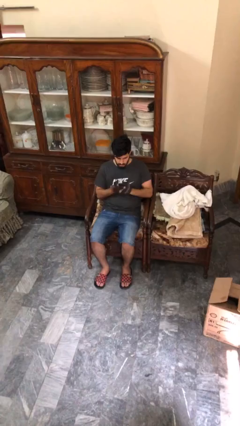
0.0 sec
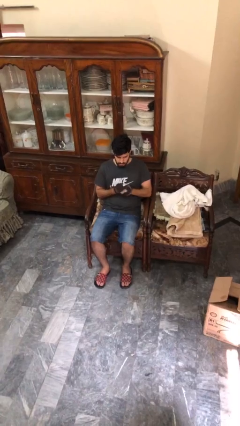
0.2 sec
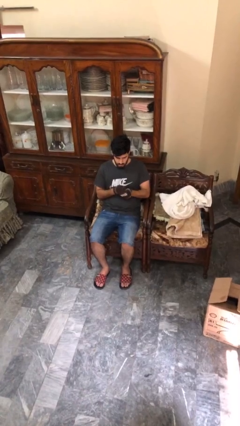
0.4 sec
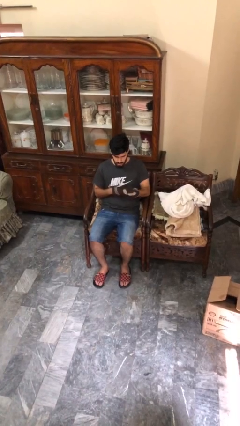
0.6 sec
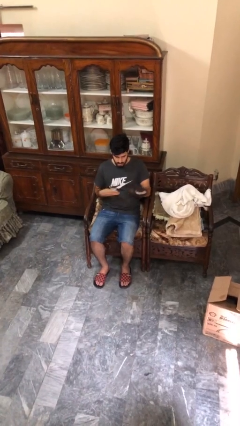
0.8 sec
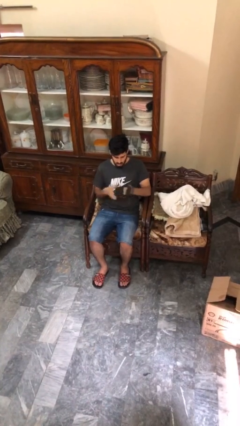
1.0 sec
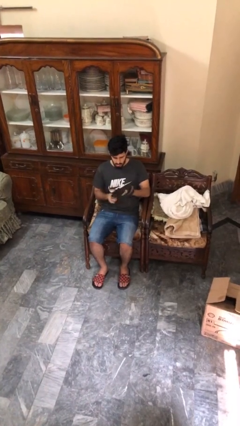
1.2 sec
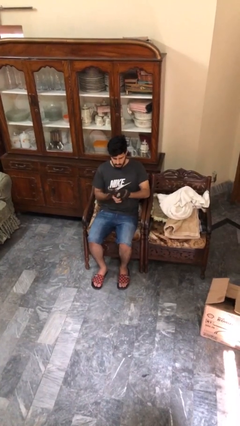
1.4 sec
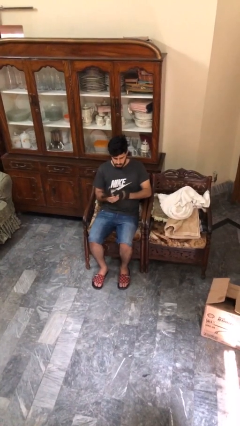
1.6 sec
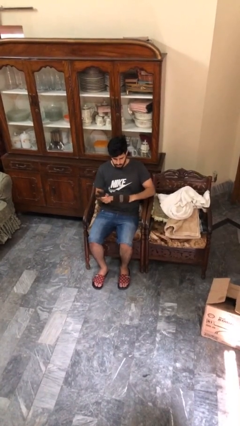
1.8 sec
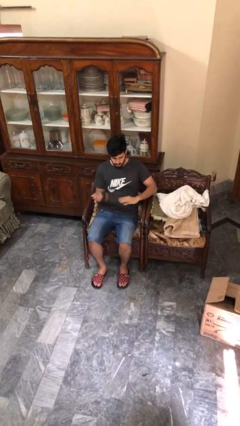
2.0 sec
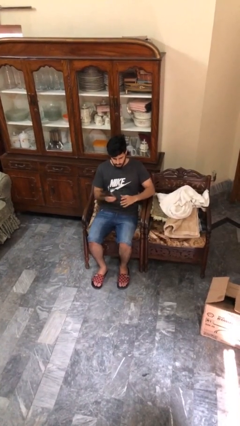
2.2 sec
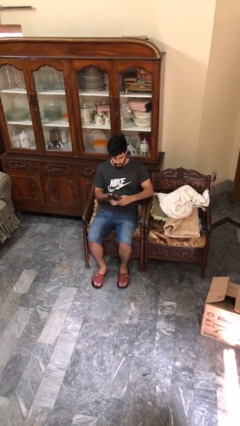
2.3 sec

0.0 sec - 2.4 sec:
person takes off gloves

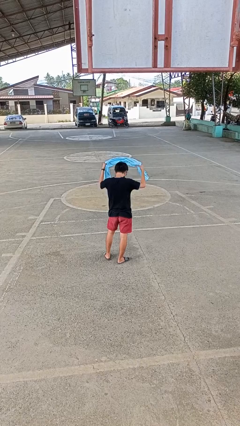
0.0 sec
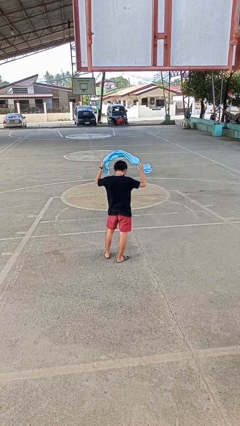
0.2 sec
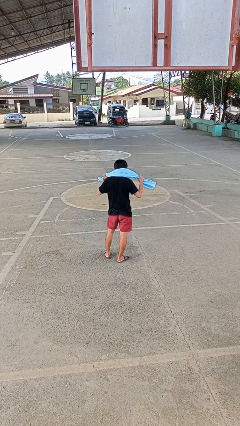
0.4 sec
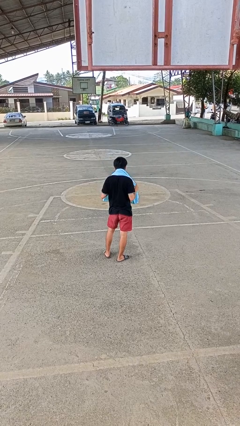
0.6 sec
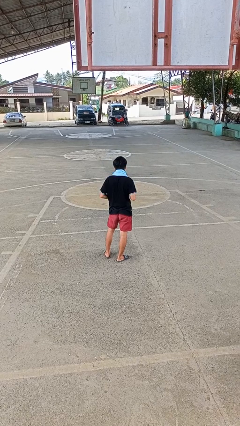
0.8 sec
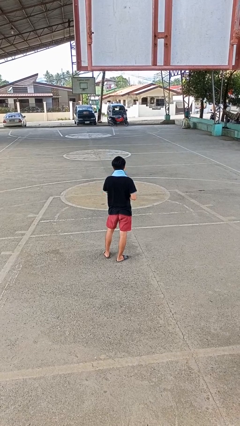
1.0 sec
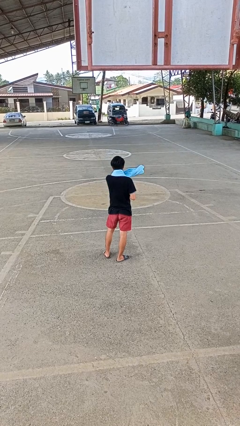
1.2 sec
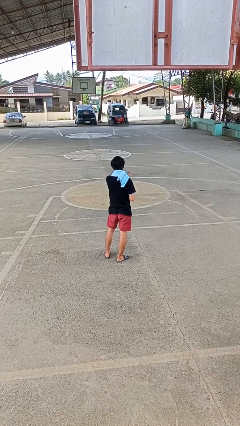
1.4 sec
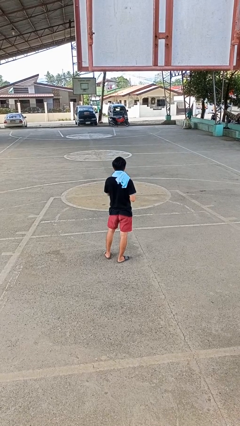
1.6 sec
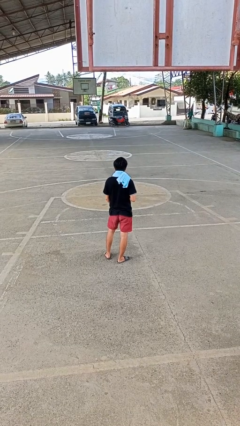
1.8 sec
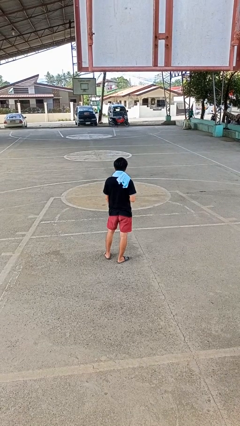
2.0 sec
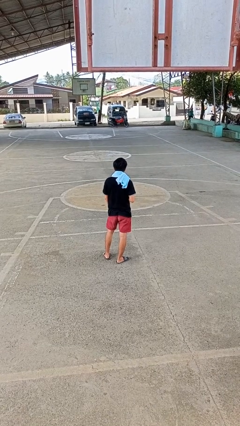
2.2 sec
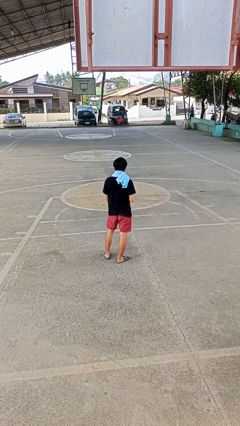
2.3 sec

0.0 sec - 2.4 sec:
person puts on scarf

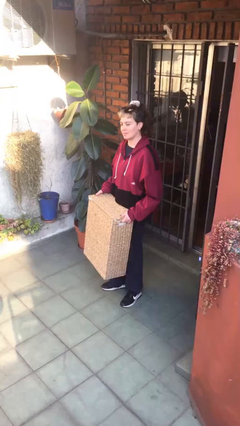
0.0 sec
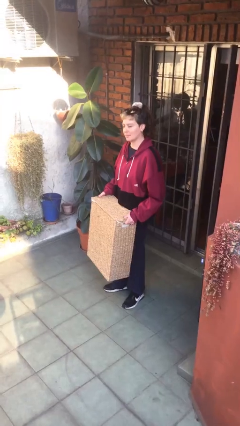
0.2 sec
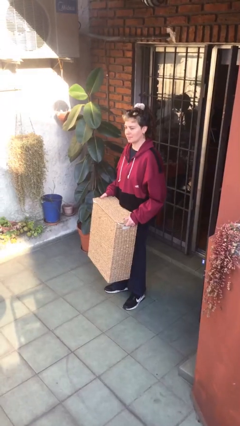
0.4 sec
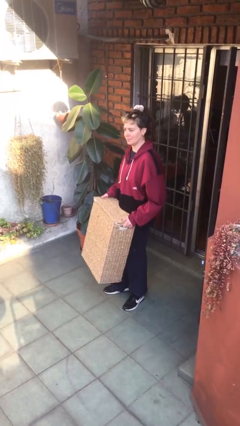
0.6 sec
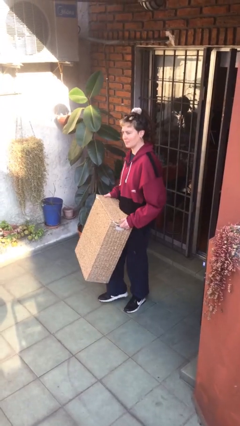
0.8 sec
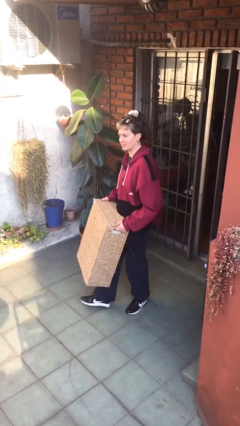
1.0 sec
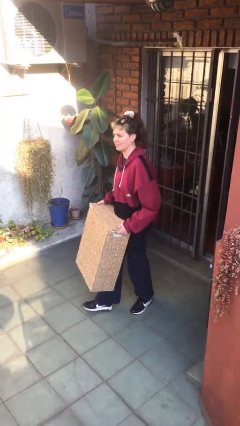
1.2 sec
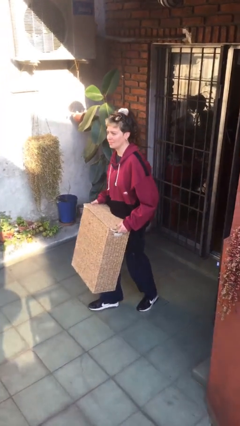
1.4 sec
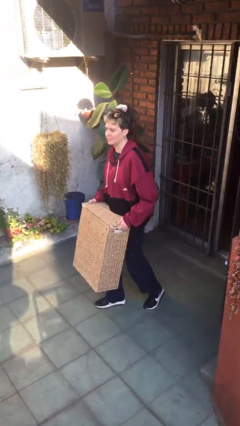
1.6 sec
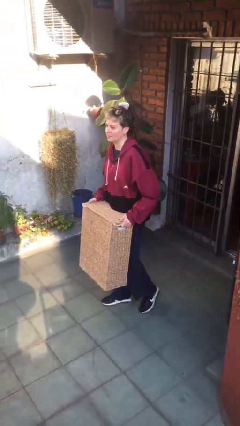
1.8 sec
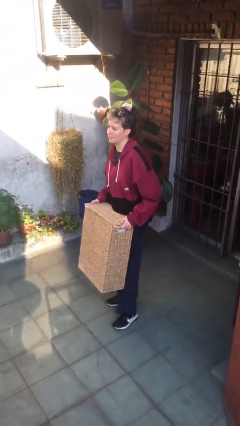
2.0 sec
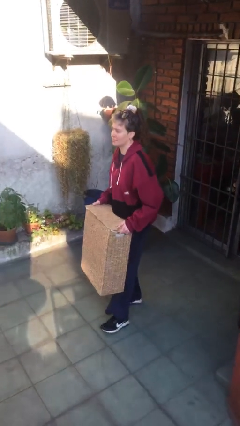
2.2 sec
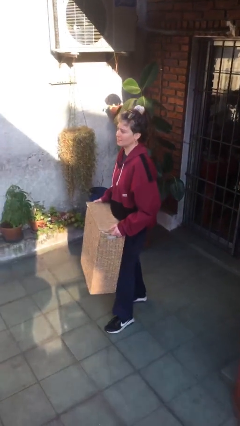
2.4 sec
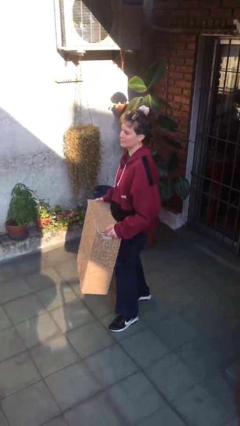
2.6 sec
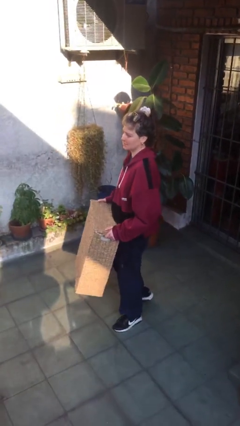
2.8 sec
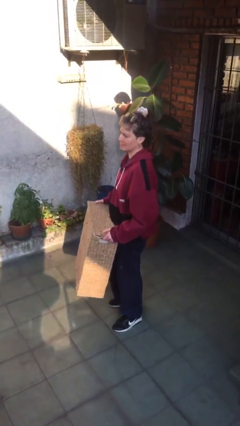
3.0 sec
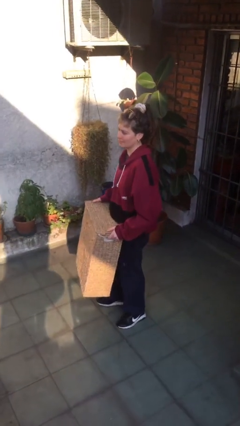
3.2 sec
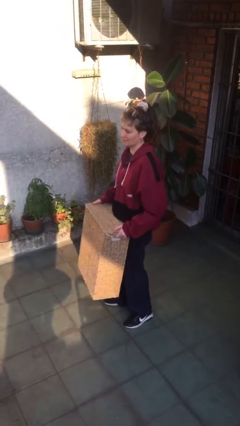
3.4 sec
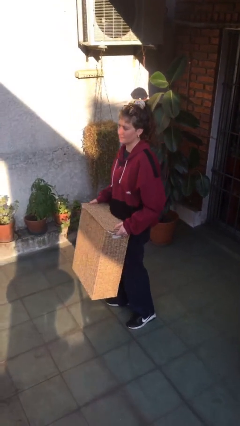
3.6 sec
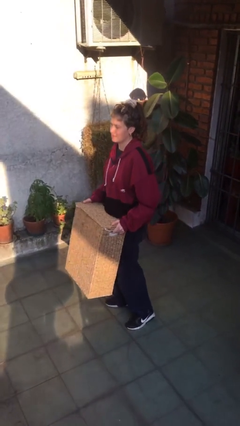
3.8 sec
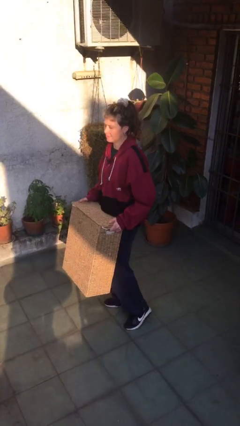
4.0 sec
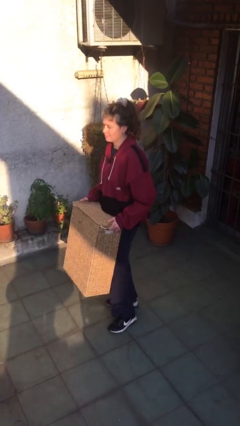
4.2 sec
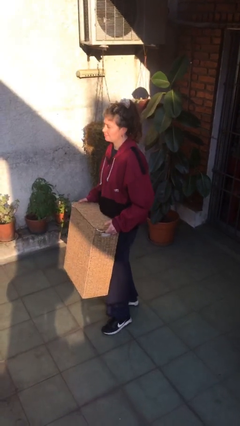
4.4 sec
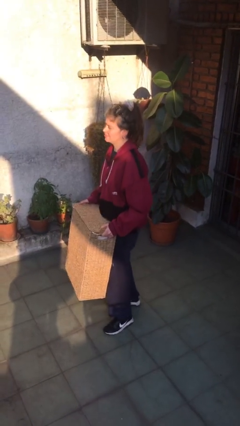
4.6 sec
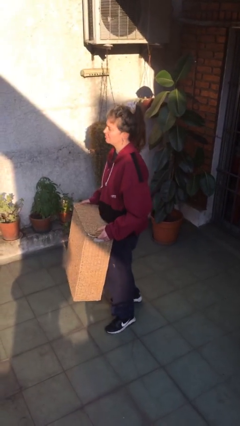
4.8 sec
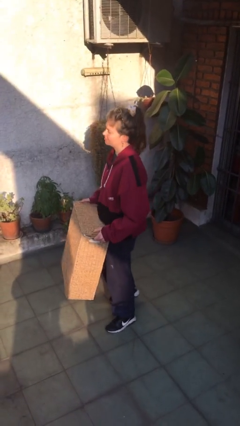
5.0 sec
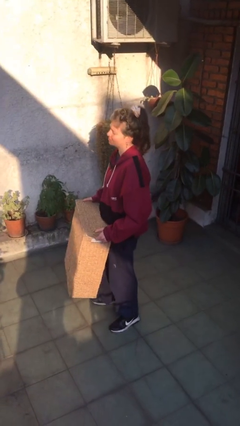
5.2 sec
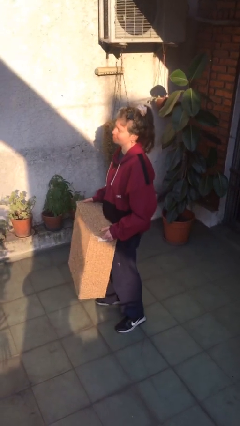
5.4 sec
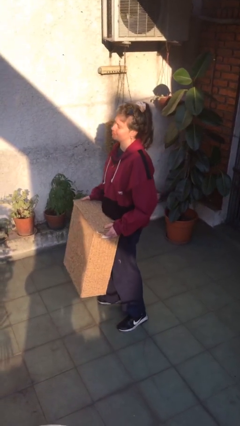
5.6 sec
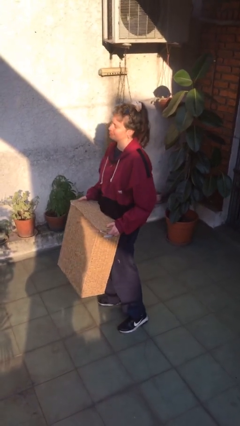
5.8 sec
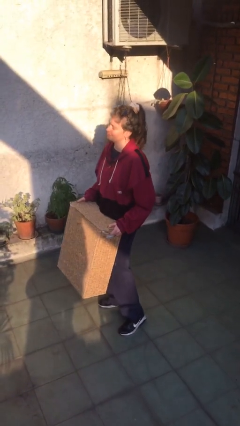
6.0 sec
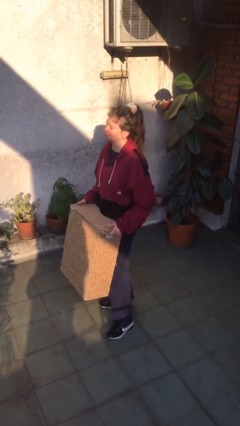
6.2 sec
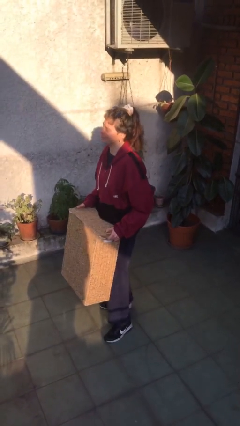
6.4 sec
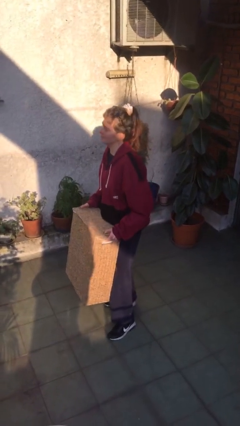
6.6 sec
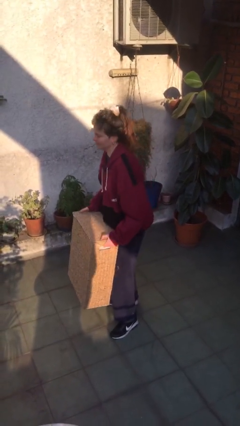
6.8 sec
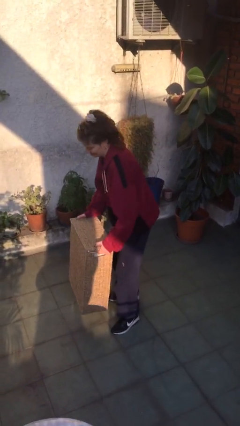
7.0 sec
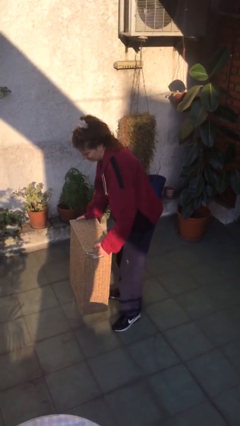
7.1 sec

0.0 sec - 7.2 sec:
person carries heavy object

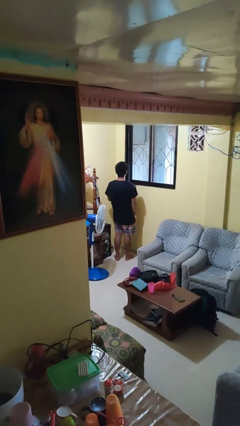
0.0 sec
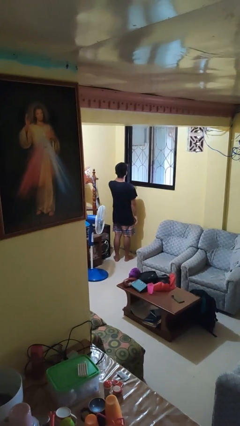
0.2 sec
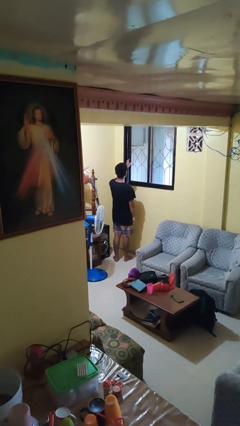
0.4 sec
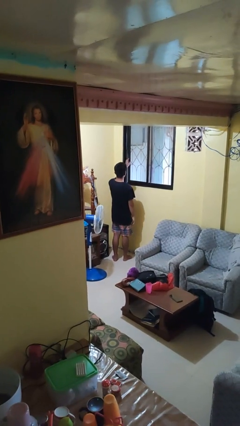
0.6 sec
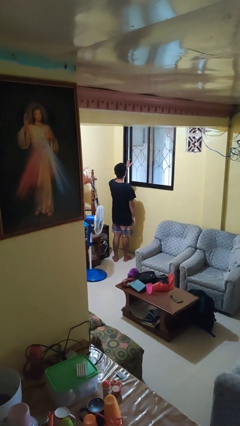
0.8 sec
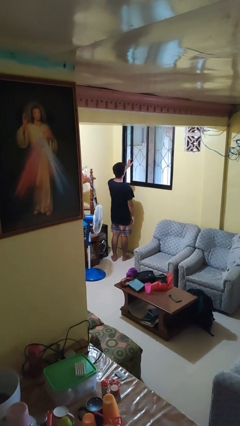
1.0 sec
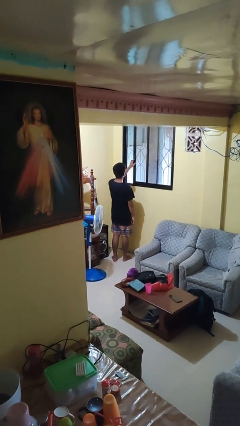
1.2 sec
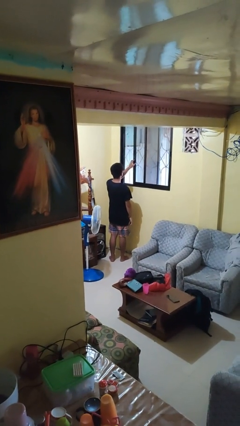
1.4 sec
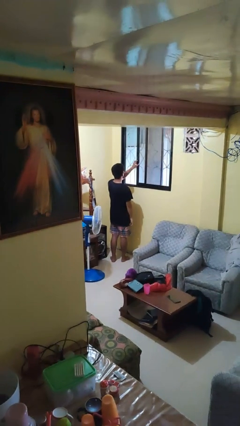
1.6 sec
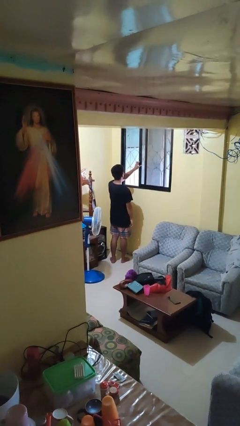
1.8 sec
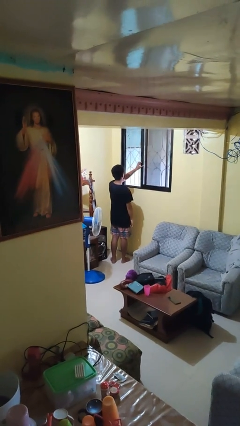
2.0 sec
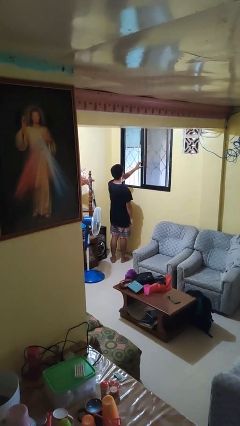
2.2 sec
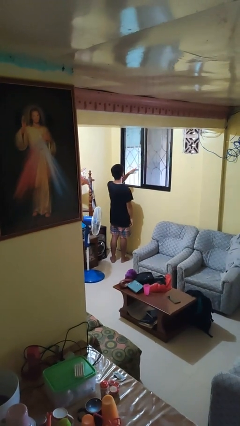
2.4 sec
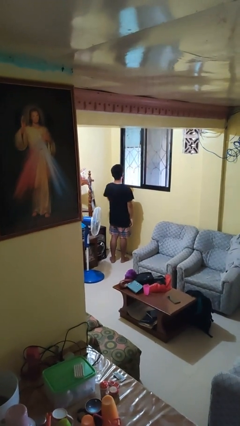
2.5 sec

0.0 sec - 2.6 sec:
person opens home window

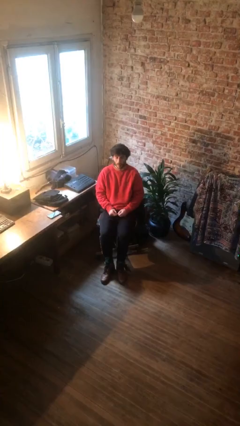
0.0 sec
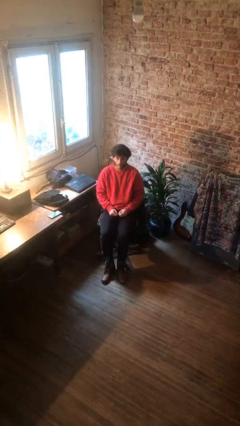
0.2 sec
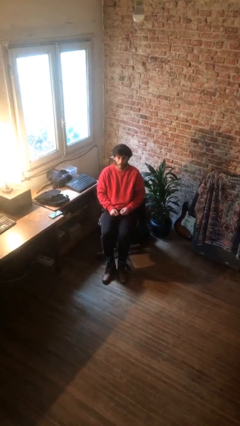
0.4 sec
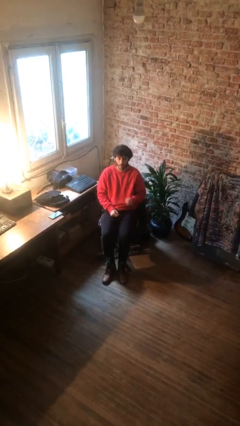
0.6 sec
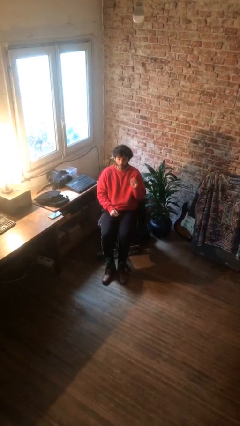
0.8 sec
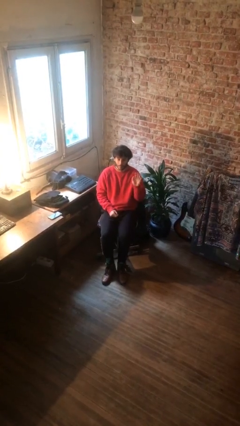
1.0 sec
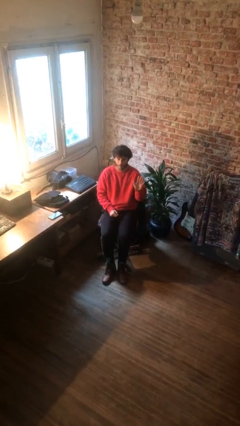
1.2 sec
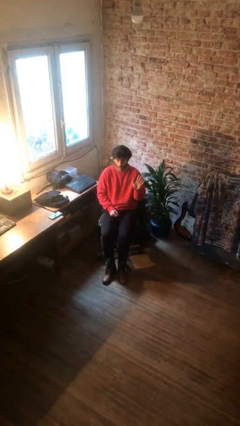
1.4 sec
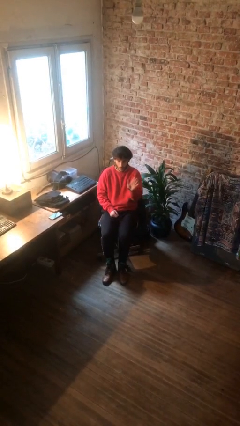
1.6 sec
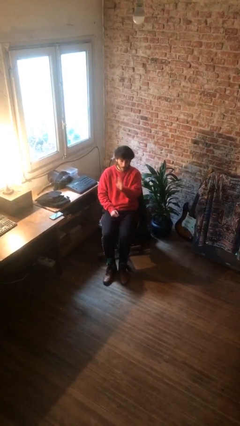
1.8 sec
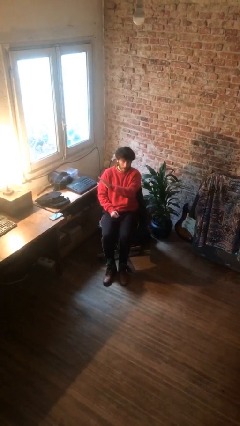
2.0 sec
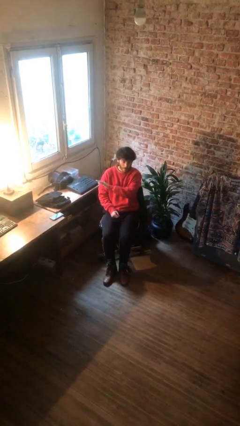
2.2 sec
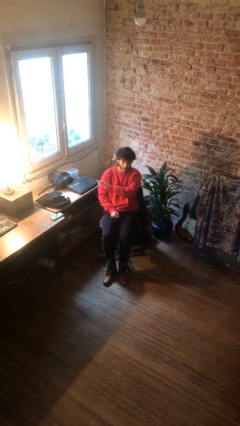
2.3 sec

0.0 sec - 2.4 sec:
person gestures swipe right

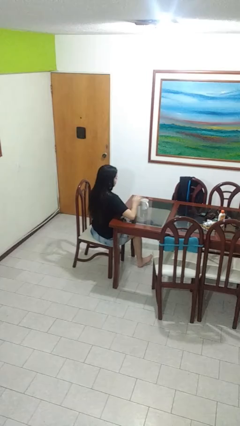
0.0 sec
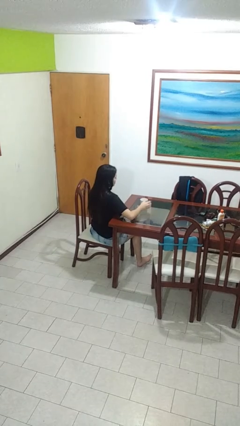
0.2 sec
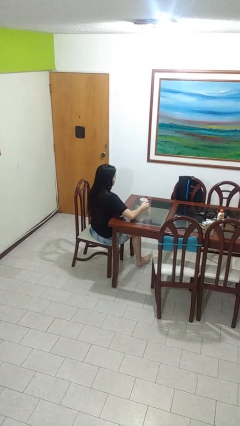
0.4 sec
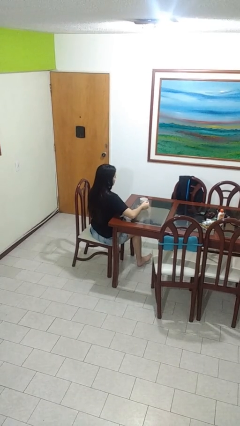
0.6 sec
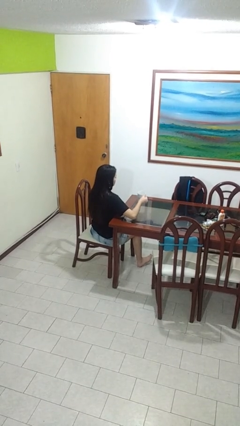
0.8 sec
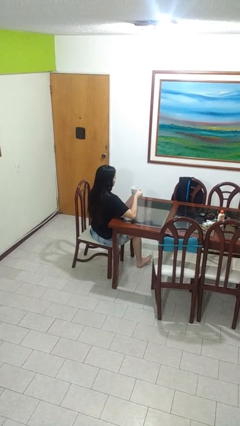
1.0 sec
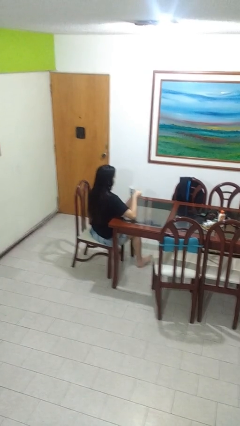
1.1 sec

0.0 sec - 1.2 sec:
person picks up object from table
